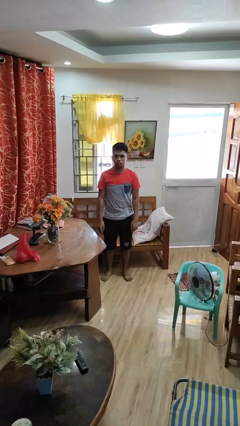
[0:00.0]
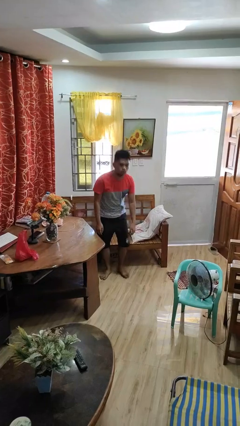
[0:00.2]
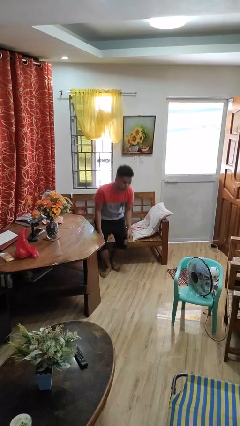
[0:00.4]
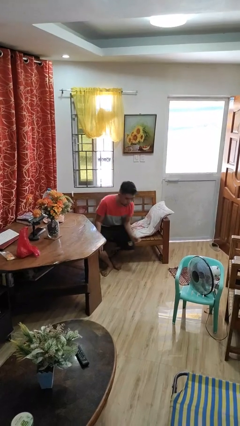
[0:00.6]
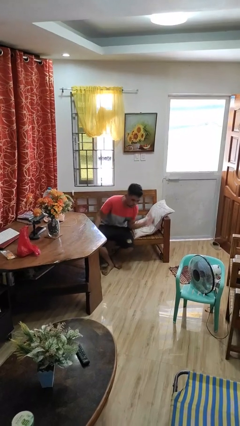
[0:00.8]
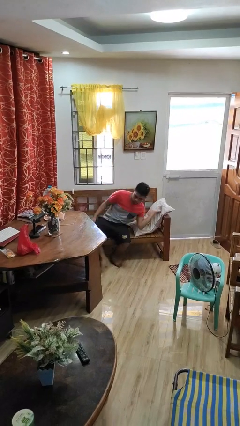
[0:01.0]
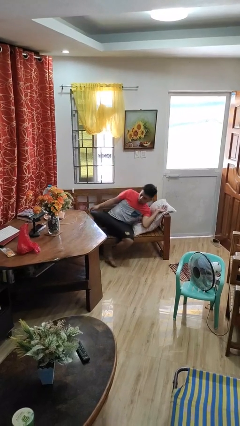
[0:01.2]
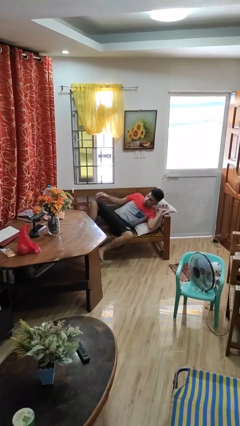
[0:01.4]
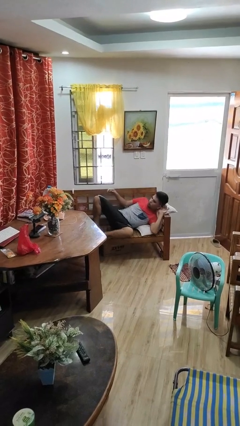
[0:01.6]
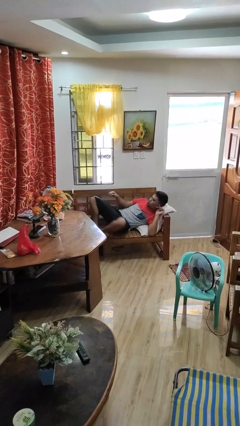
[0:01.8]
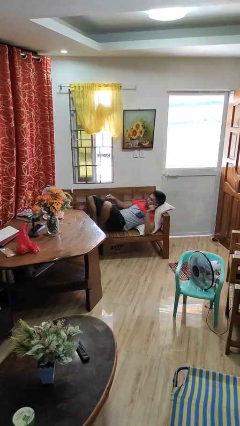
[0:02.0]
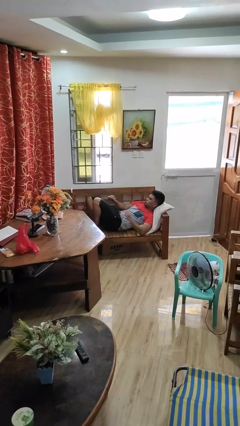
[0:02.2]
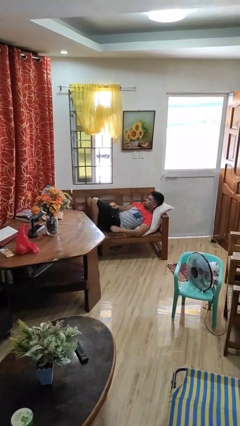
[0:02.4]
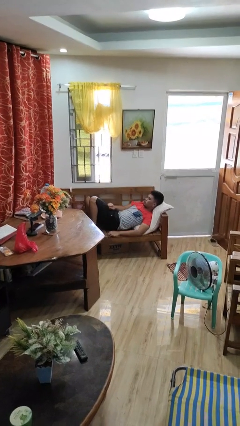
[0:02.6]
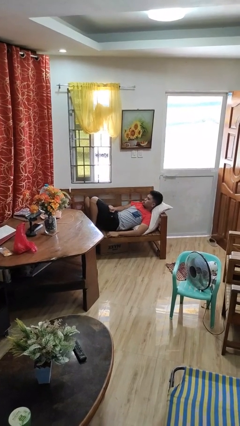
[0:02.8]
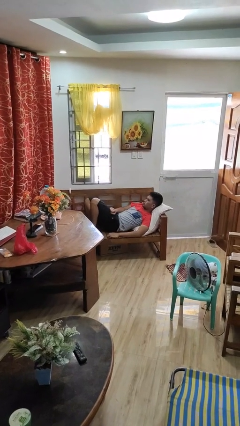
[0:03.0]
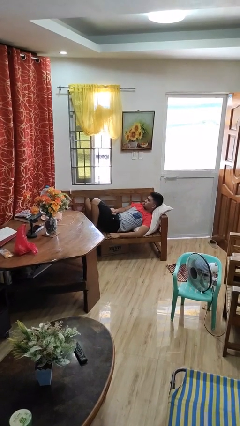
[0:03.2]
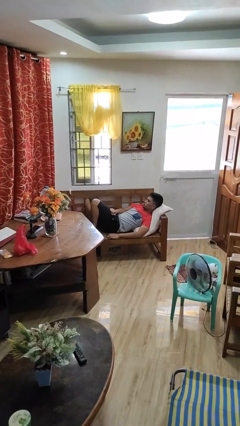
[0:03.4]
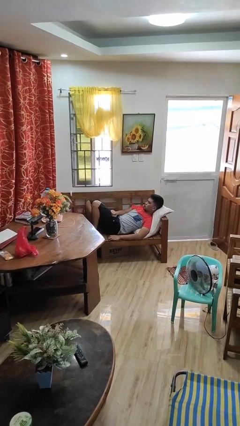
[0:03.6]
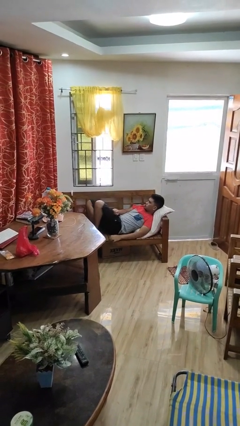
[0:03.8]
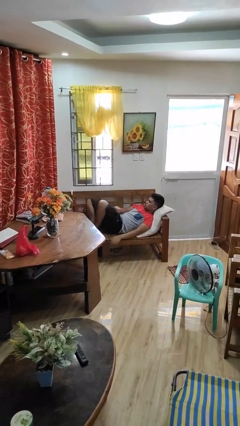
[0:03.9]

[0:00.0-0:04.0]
person lies down on couch

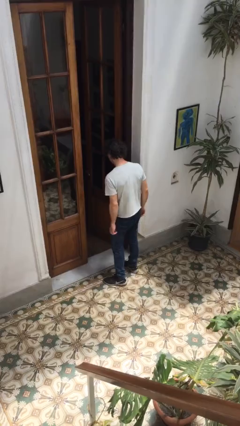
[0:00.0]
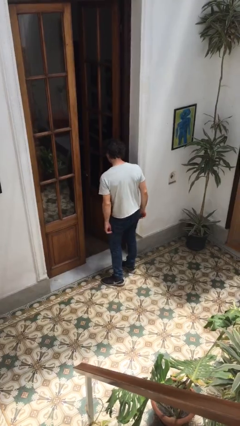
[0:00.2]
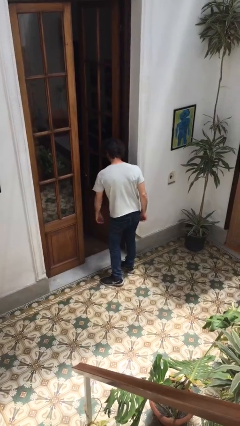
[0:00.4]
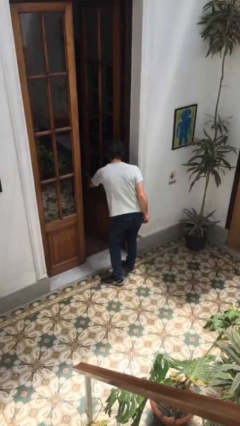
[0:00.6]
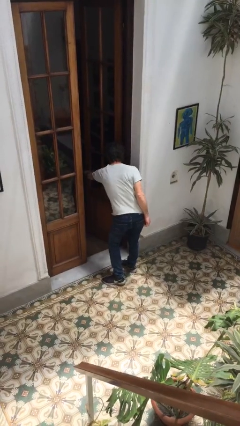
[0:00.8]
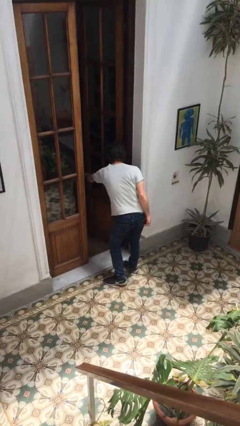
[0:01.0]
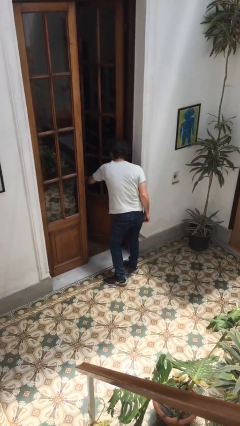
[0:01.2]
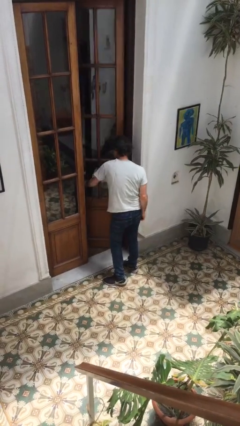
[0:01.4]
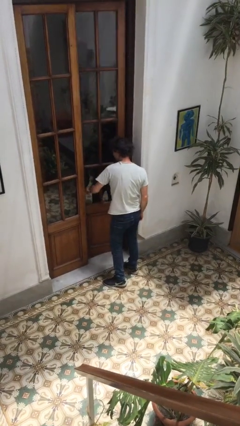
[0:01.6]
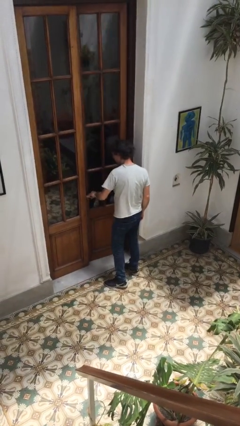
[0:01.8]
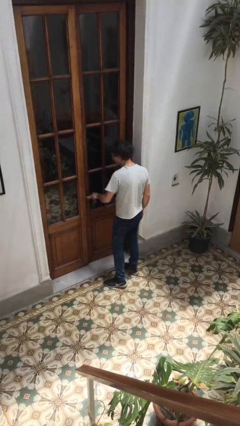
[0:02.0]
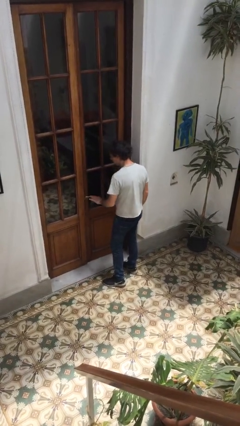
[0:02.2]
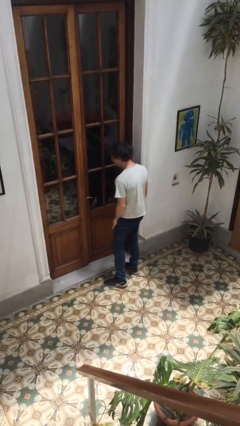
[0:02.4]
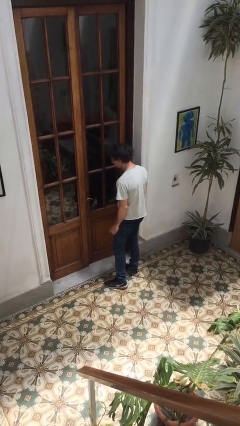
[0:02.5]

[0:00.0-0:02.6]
person closes facility door

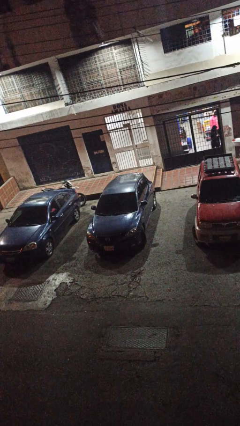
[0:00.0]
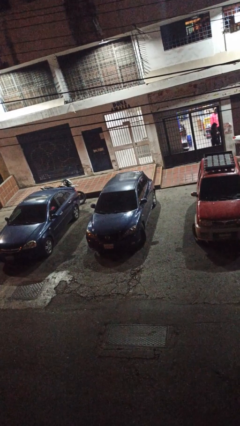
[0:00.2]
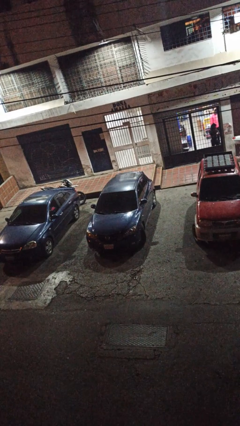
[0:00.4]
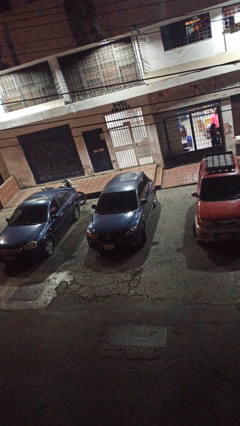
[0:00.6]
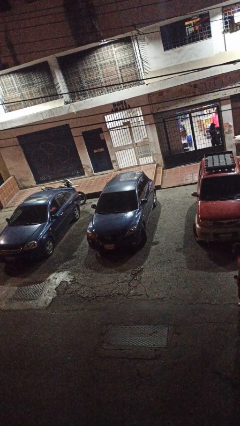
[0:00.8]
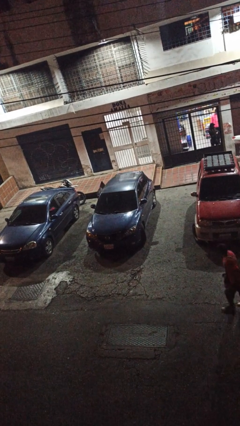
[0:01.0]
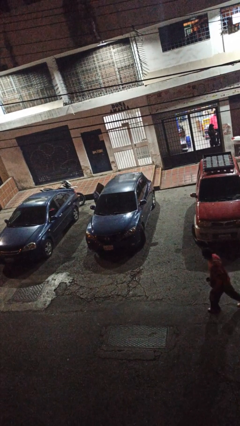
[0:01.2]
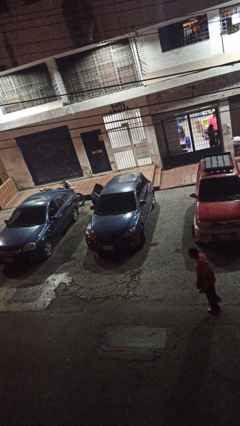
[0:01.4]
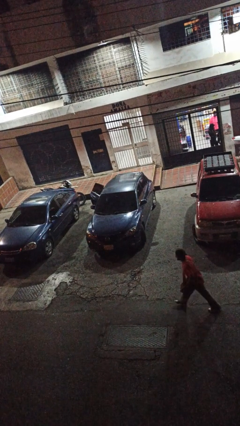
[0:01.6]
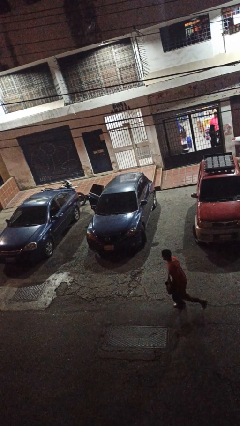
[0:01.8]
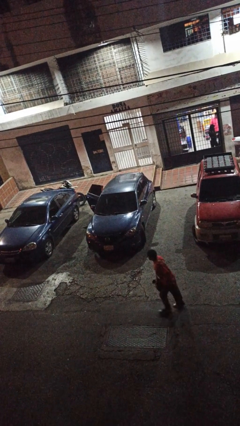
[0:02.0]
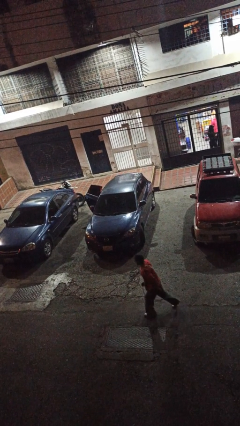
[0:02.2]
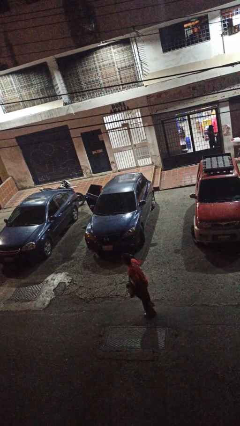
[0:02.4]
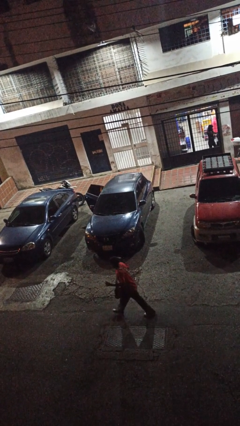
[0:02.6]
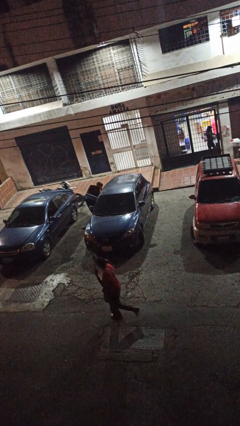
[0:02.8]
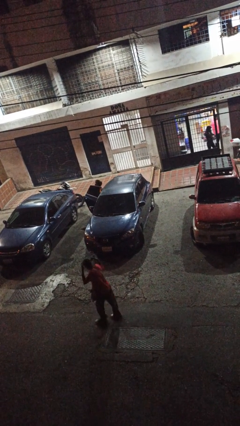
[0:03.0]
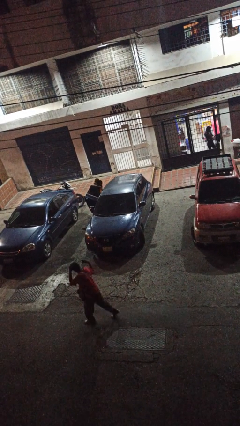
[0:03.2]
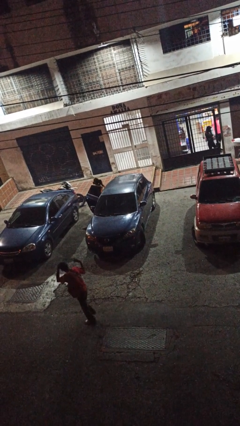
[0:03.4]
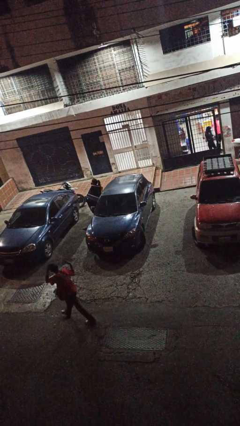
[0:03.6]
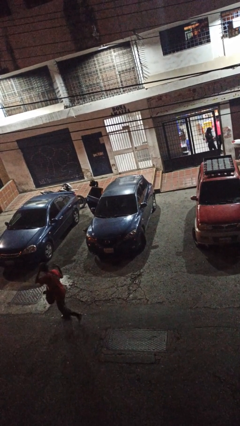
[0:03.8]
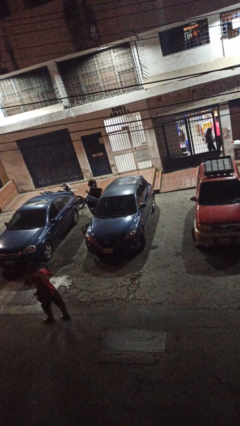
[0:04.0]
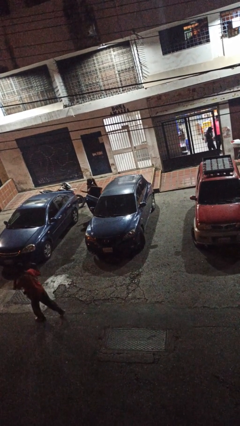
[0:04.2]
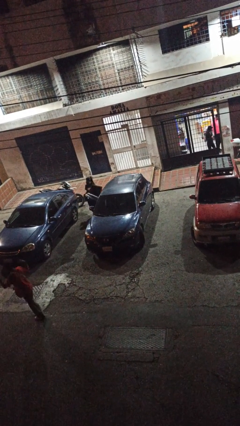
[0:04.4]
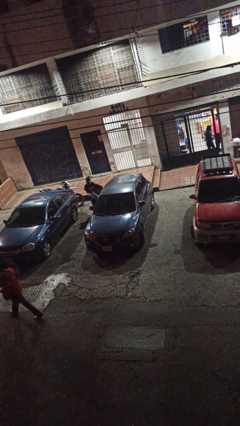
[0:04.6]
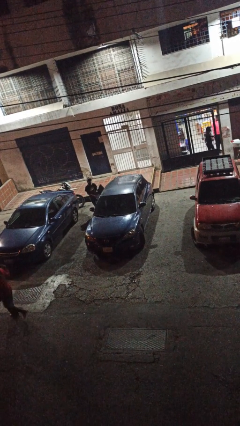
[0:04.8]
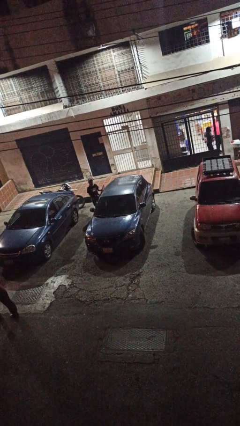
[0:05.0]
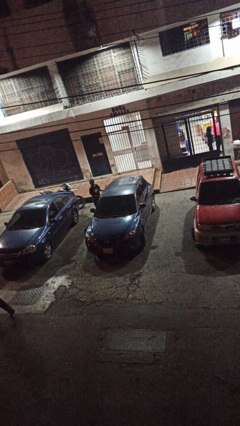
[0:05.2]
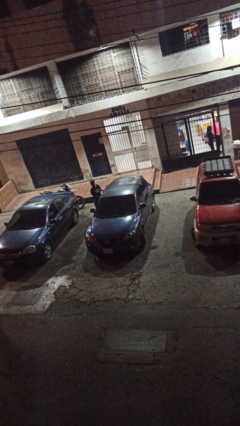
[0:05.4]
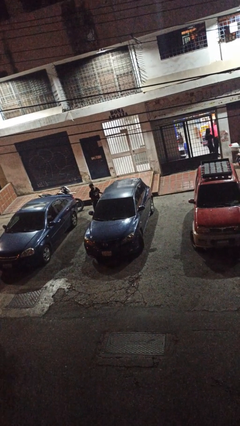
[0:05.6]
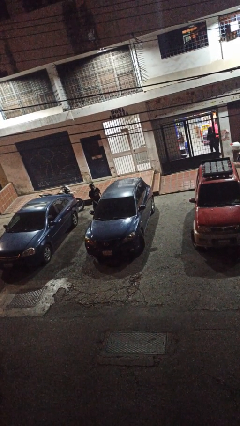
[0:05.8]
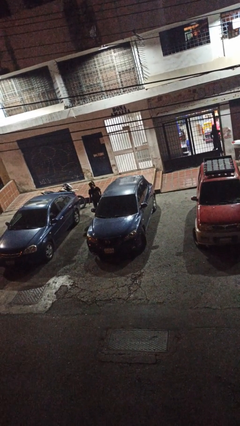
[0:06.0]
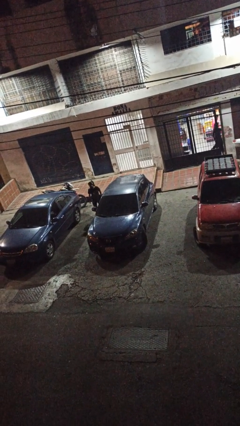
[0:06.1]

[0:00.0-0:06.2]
car drops off person

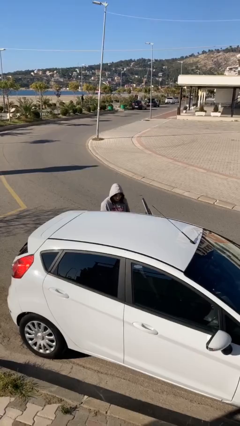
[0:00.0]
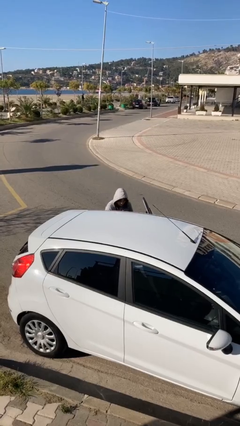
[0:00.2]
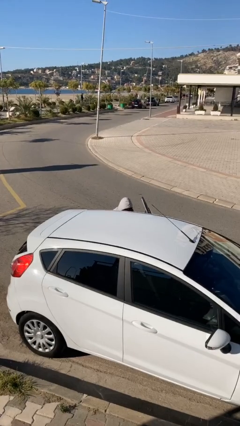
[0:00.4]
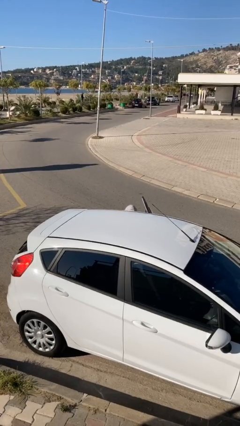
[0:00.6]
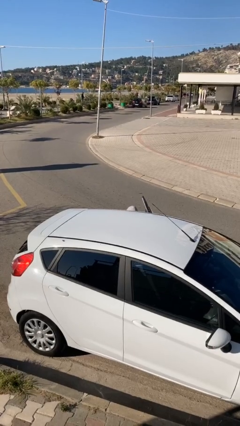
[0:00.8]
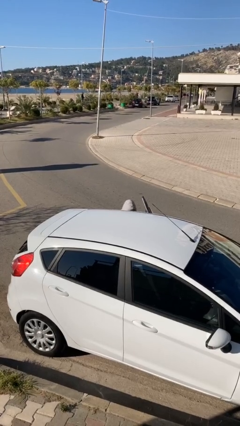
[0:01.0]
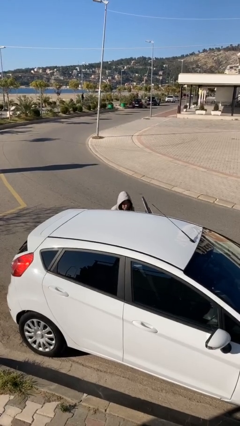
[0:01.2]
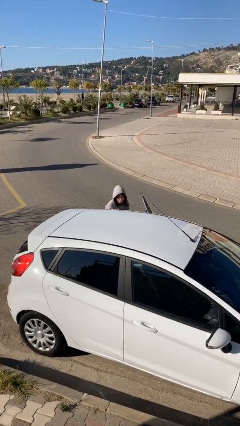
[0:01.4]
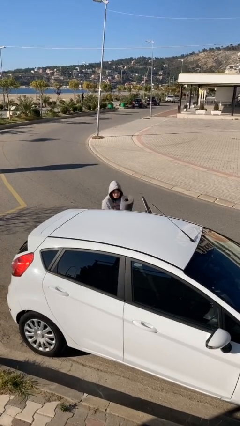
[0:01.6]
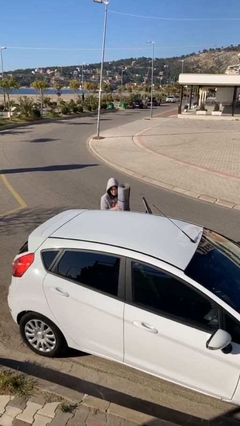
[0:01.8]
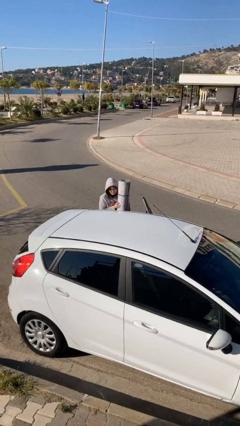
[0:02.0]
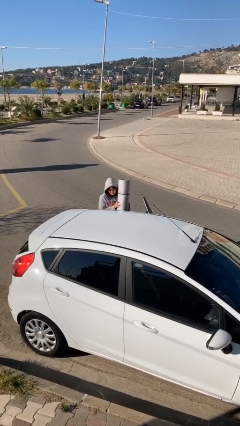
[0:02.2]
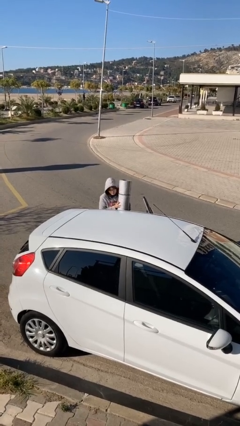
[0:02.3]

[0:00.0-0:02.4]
person unloads car

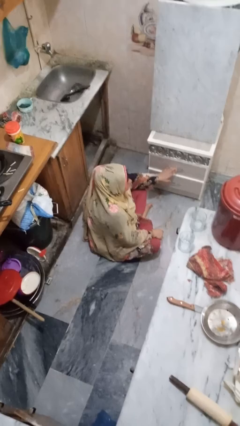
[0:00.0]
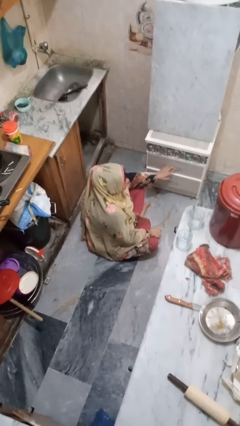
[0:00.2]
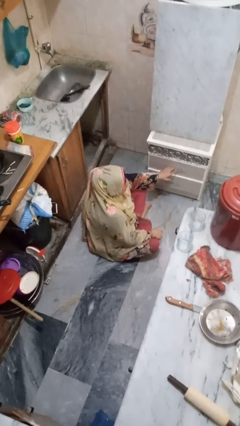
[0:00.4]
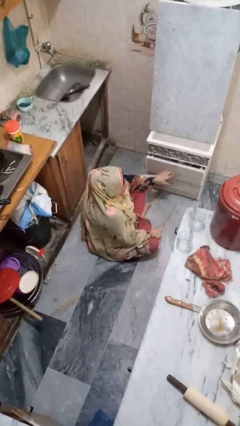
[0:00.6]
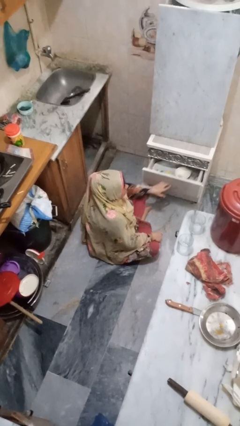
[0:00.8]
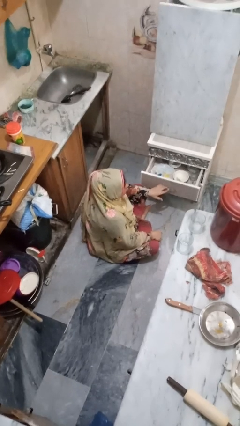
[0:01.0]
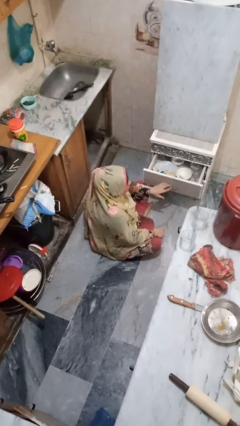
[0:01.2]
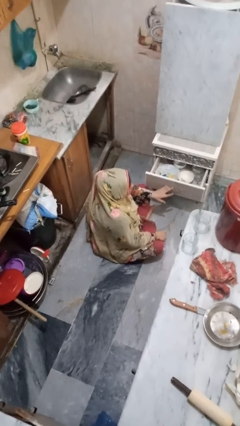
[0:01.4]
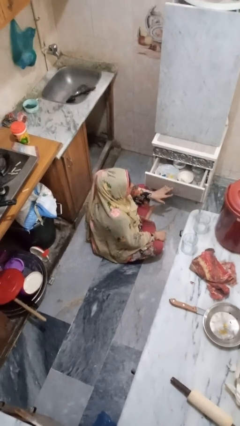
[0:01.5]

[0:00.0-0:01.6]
person opens kitchen drawer

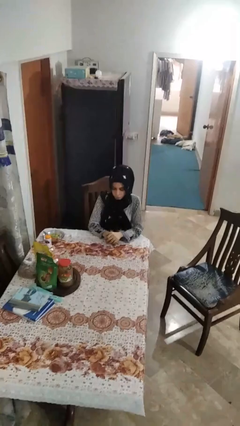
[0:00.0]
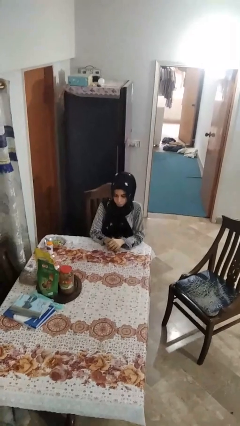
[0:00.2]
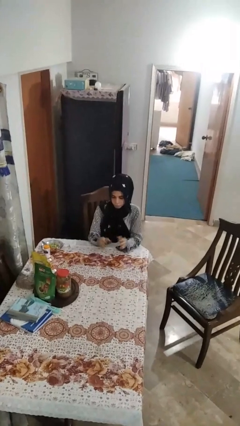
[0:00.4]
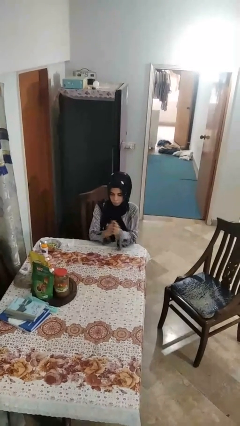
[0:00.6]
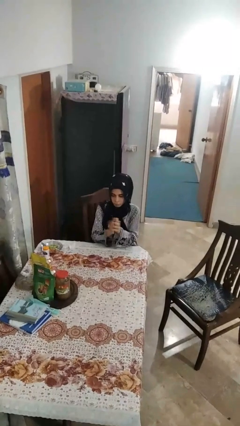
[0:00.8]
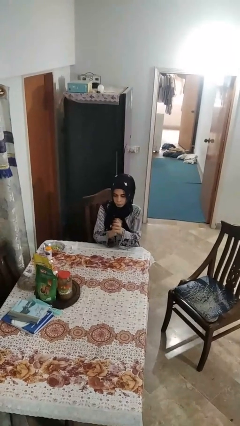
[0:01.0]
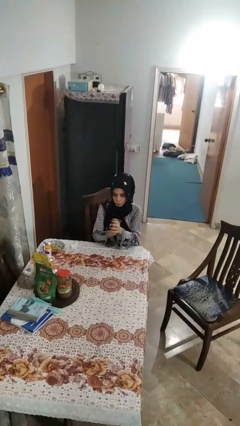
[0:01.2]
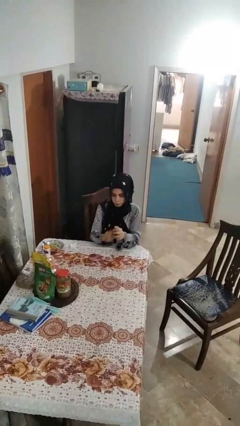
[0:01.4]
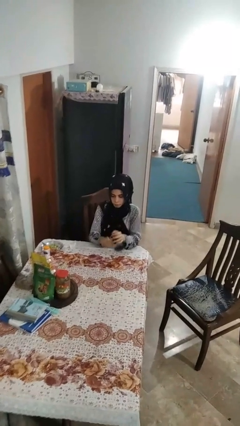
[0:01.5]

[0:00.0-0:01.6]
person claps hands
